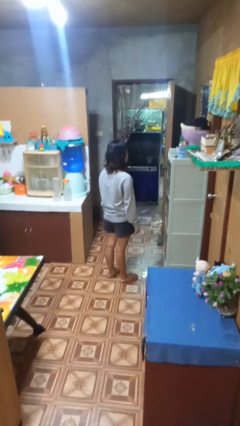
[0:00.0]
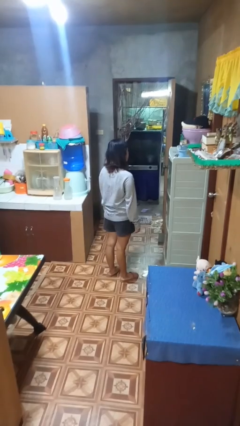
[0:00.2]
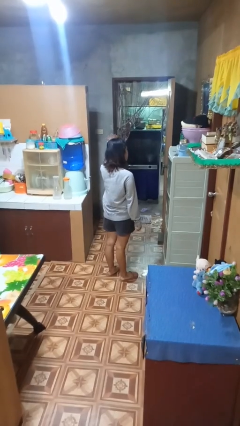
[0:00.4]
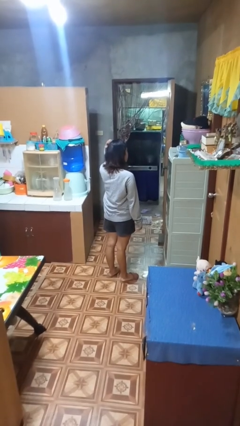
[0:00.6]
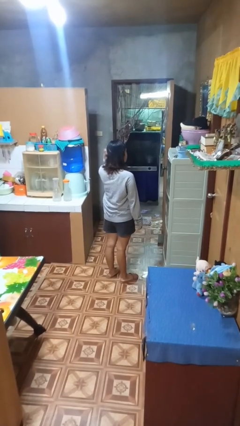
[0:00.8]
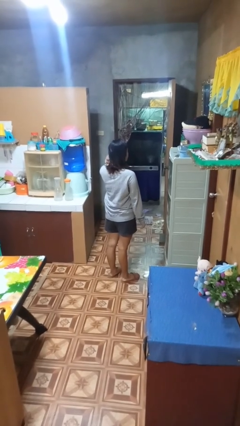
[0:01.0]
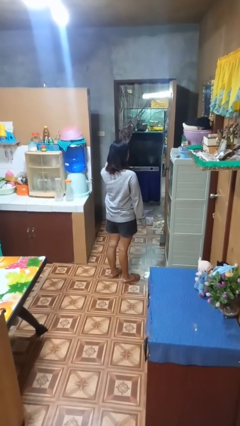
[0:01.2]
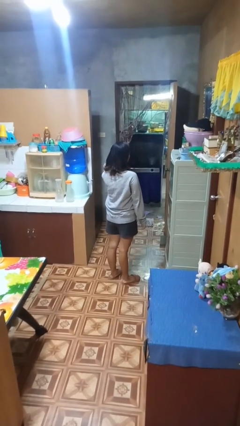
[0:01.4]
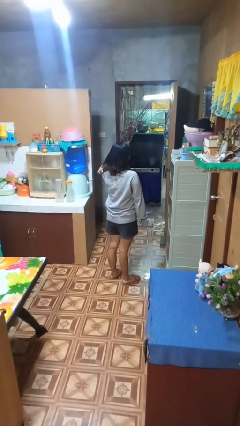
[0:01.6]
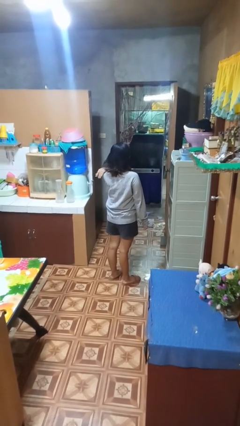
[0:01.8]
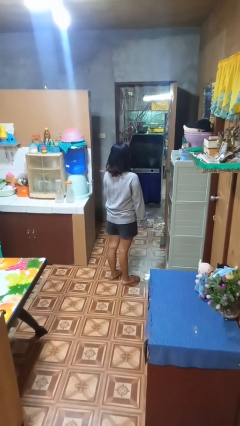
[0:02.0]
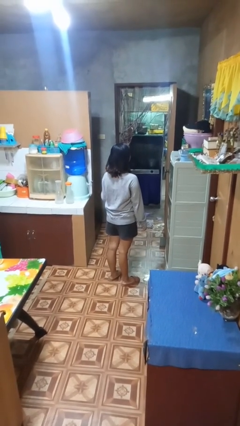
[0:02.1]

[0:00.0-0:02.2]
person strokes hair

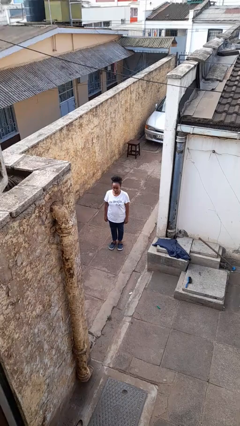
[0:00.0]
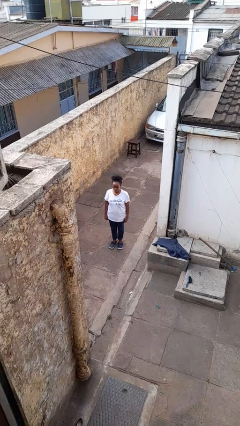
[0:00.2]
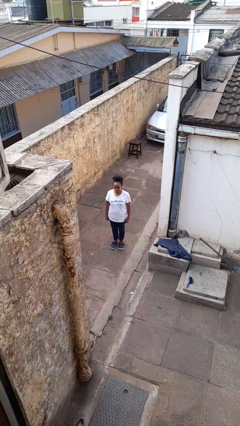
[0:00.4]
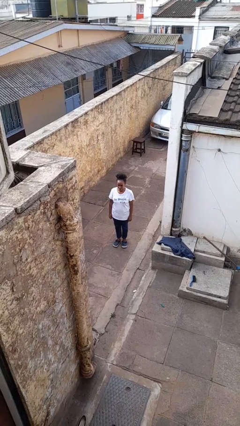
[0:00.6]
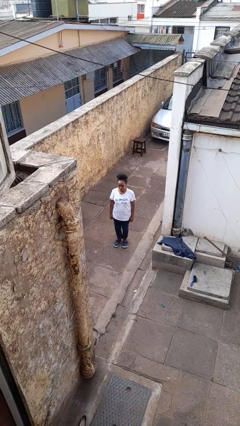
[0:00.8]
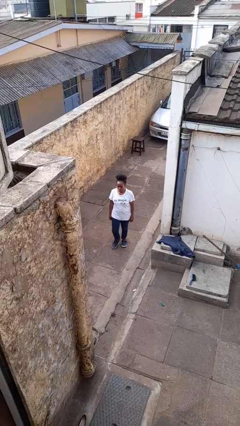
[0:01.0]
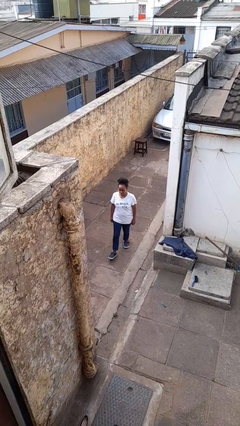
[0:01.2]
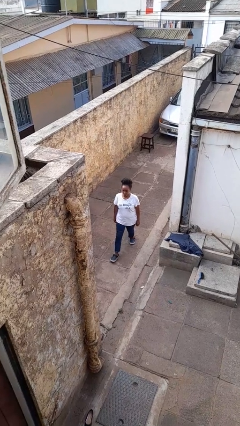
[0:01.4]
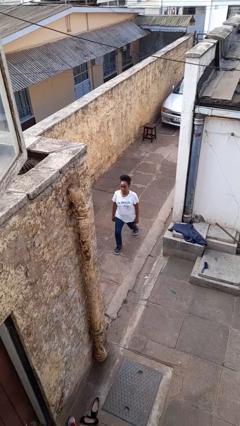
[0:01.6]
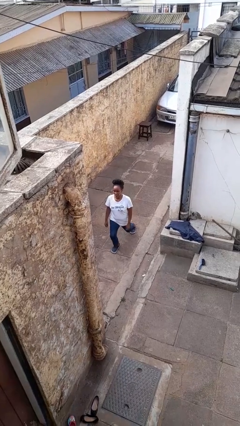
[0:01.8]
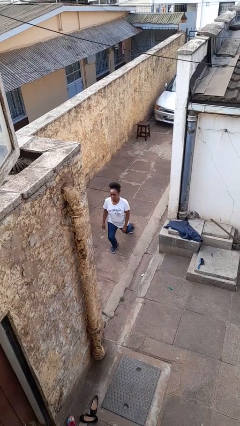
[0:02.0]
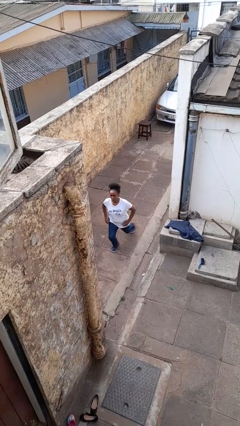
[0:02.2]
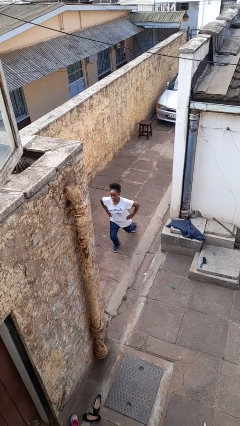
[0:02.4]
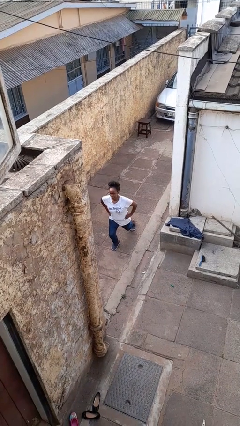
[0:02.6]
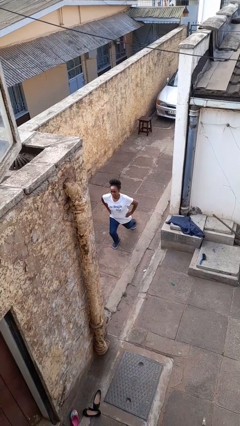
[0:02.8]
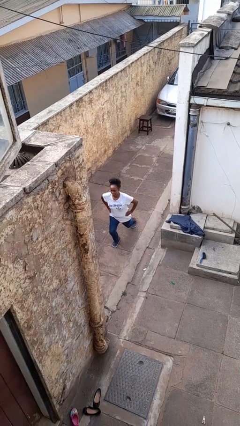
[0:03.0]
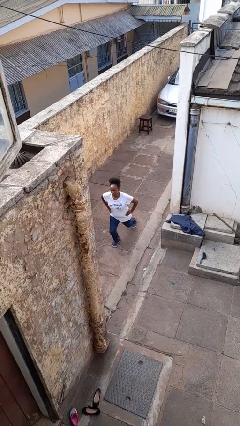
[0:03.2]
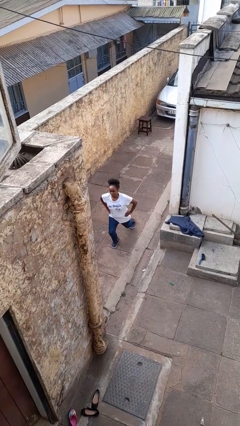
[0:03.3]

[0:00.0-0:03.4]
person exercises with lunges

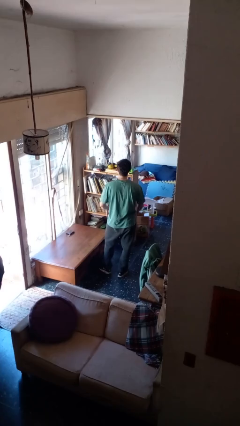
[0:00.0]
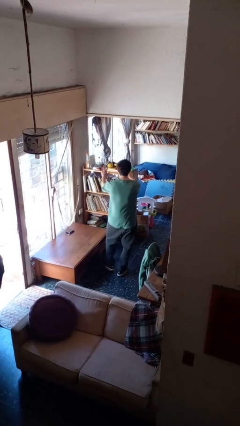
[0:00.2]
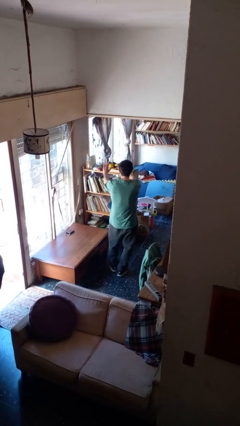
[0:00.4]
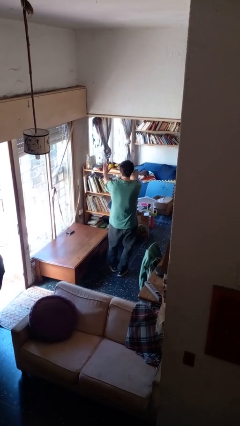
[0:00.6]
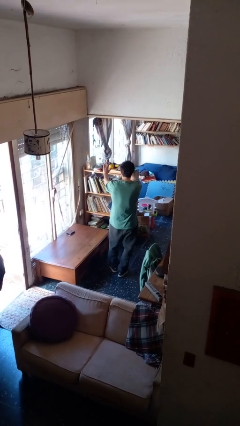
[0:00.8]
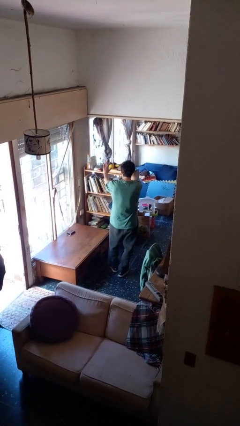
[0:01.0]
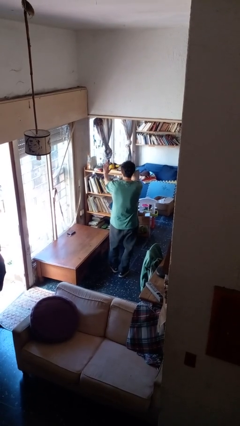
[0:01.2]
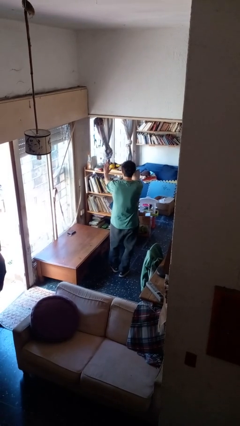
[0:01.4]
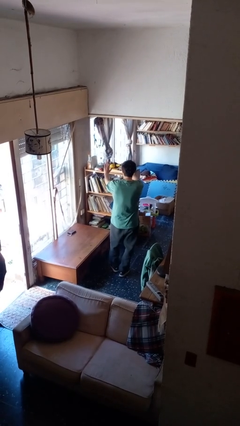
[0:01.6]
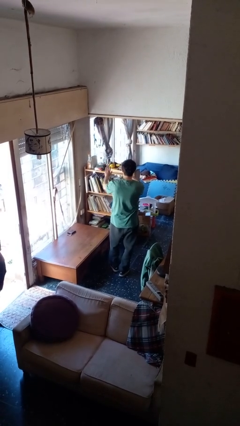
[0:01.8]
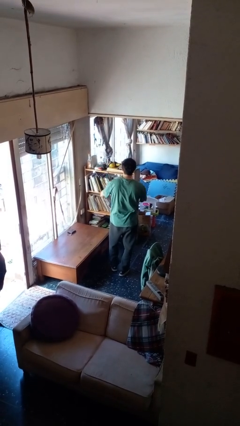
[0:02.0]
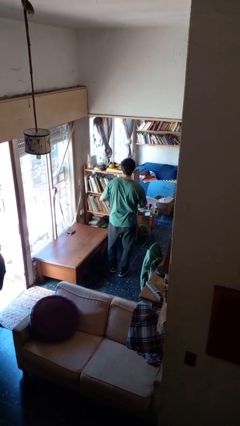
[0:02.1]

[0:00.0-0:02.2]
person gestures stop

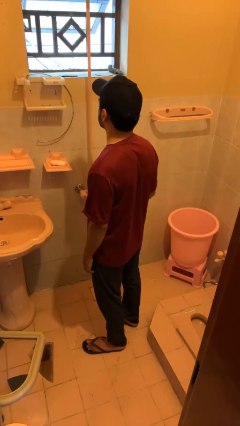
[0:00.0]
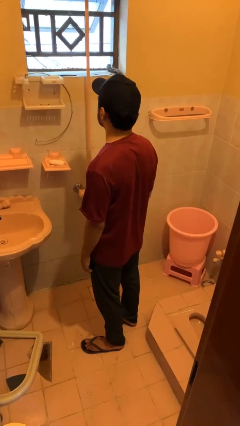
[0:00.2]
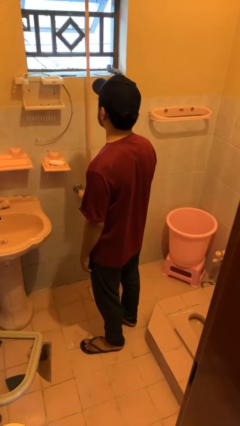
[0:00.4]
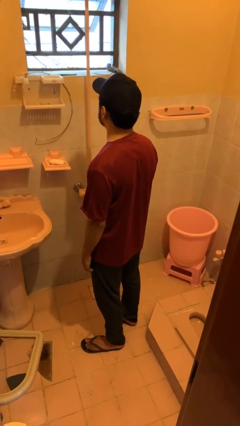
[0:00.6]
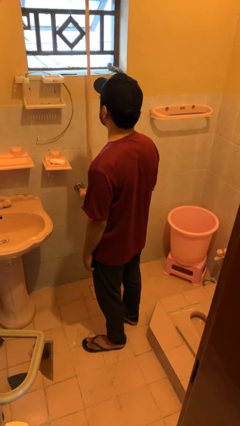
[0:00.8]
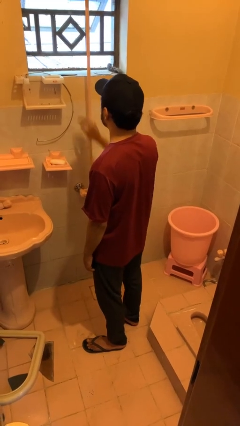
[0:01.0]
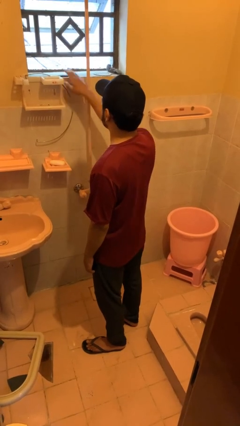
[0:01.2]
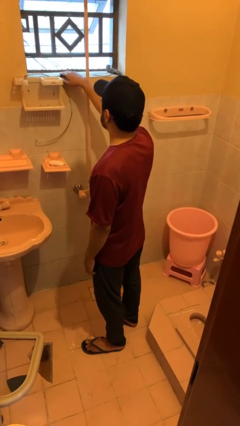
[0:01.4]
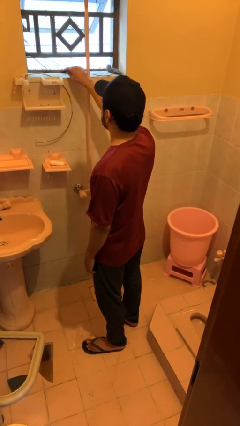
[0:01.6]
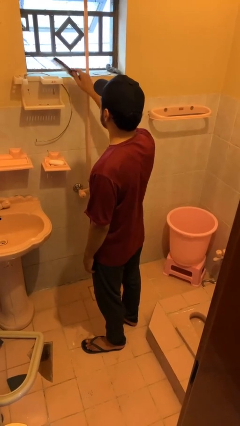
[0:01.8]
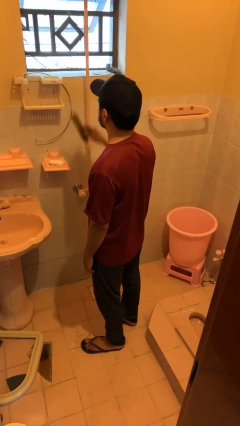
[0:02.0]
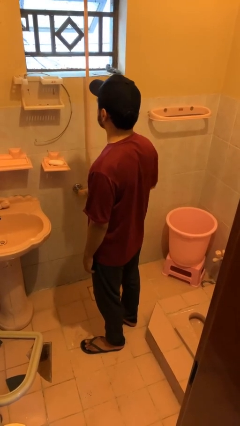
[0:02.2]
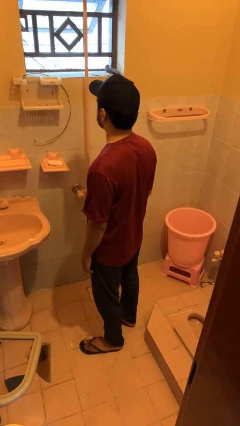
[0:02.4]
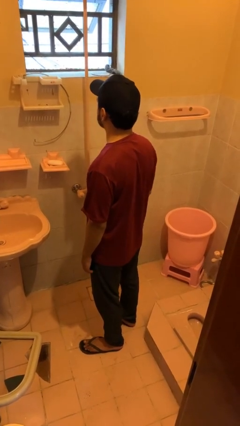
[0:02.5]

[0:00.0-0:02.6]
person picks up object from countertop

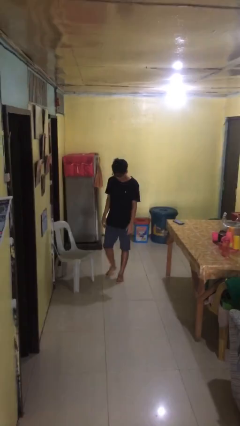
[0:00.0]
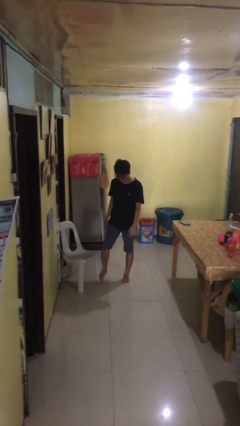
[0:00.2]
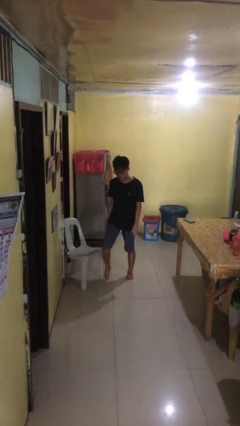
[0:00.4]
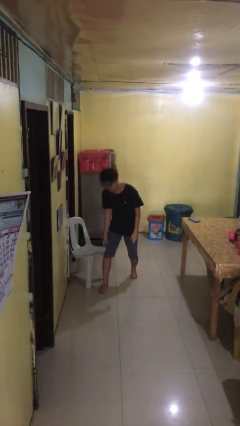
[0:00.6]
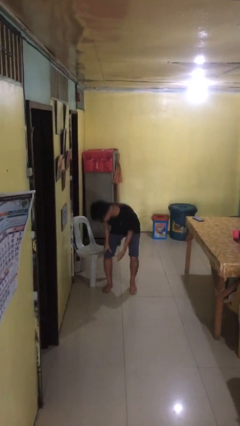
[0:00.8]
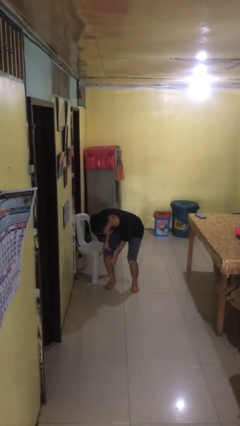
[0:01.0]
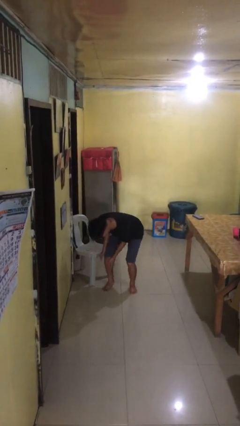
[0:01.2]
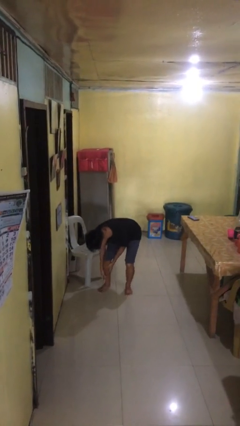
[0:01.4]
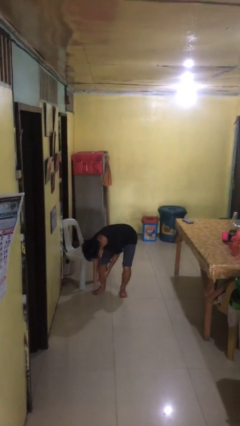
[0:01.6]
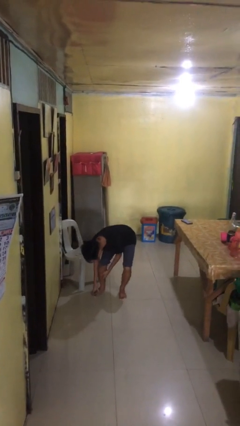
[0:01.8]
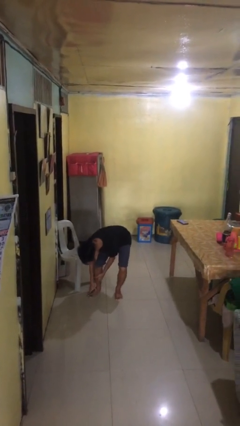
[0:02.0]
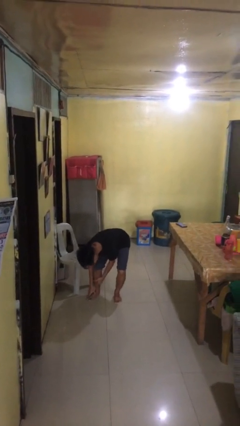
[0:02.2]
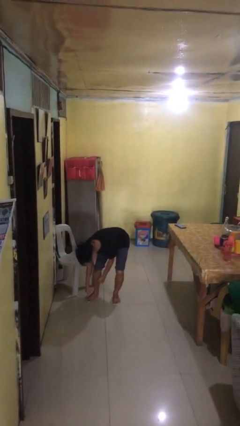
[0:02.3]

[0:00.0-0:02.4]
person stubs toe

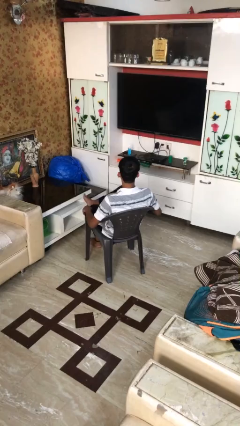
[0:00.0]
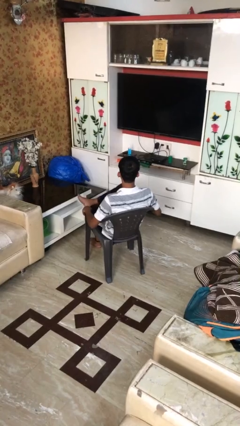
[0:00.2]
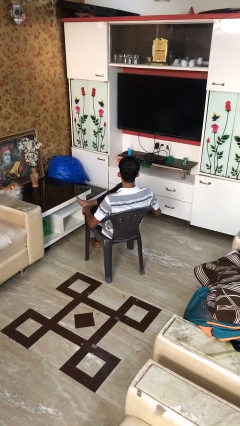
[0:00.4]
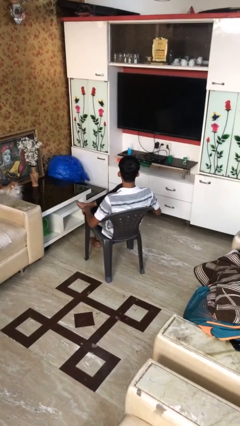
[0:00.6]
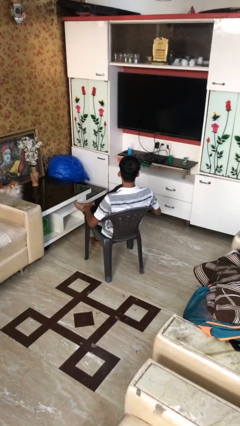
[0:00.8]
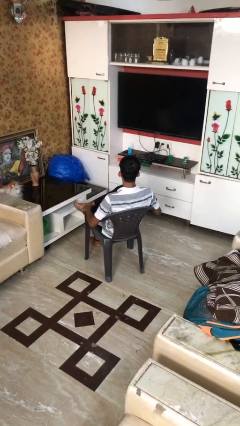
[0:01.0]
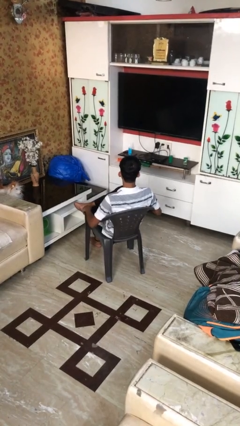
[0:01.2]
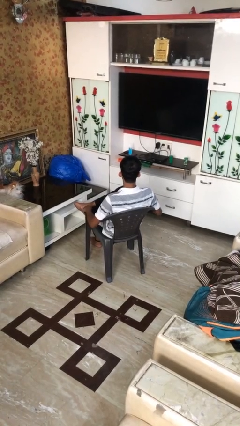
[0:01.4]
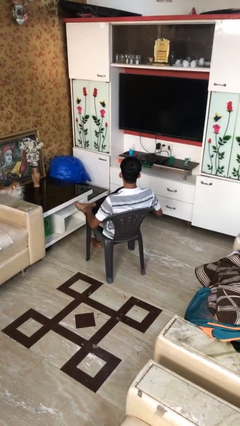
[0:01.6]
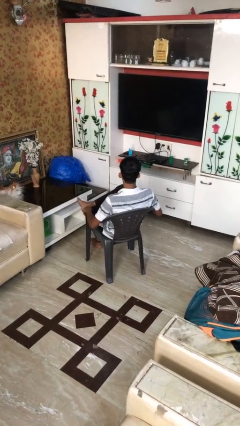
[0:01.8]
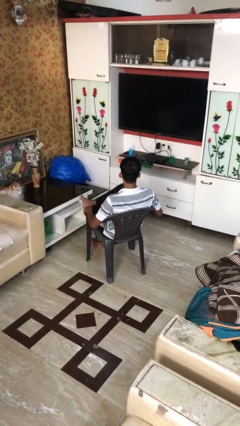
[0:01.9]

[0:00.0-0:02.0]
person crosses legs

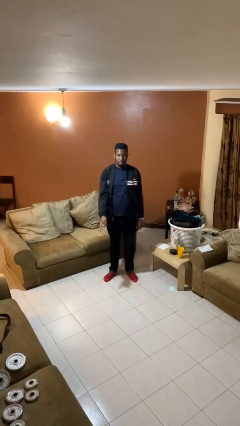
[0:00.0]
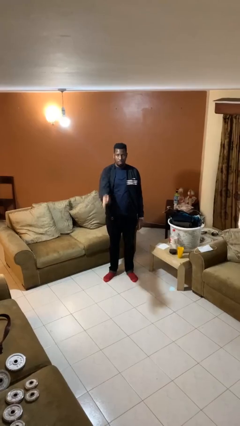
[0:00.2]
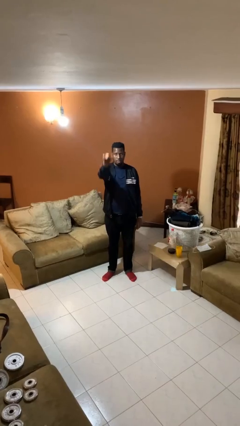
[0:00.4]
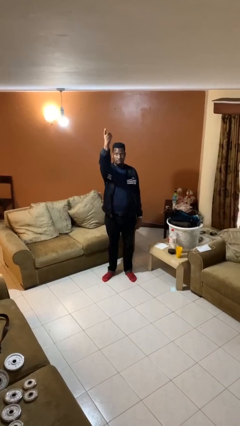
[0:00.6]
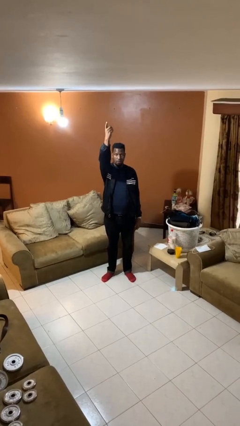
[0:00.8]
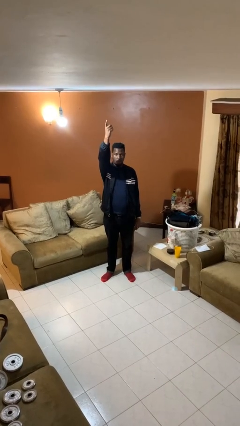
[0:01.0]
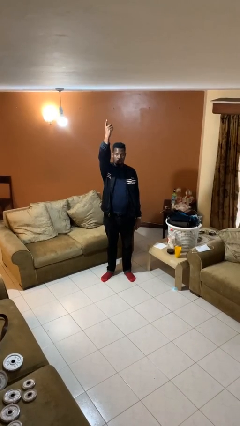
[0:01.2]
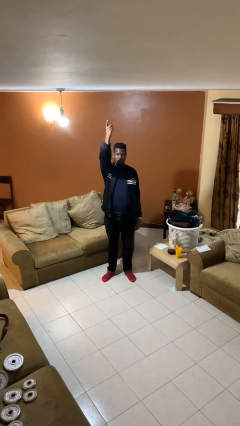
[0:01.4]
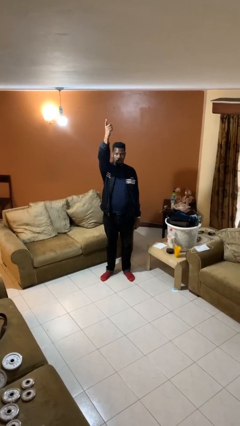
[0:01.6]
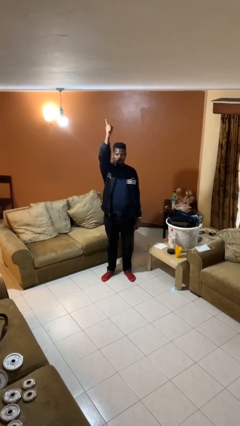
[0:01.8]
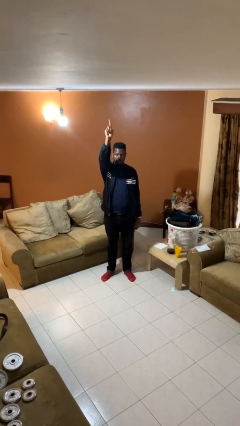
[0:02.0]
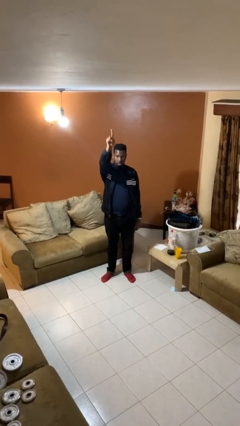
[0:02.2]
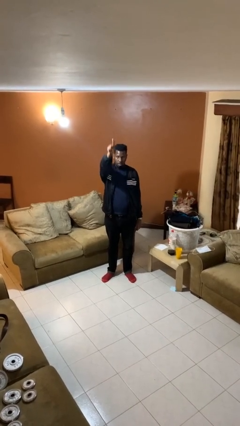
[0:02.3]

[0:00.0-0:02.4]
person gestures swipe up
